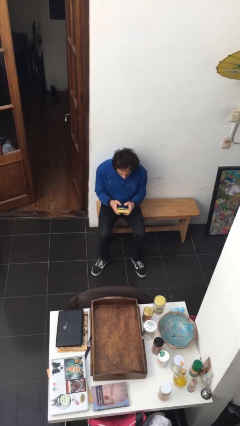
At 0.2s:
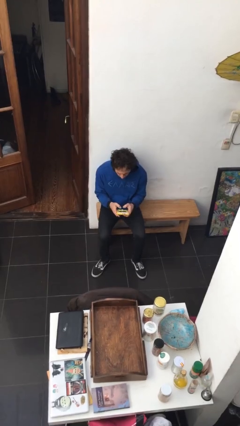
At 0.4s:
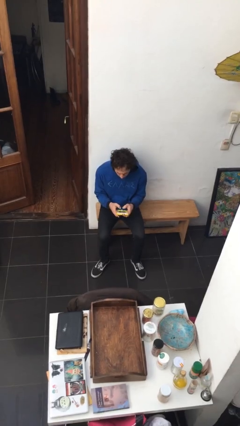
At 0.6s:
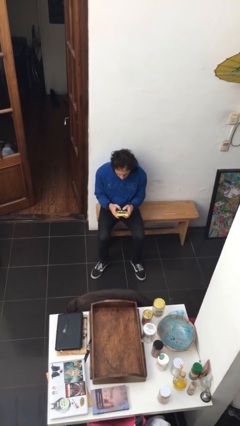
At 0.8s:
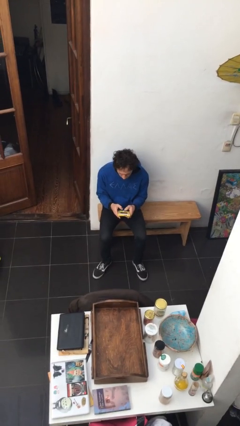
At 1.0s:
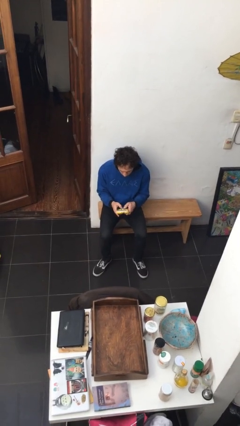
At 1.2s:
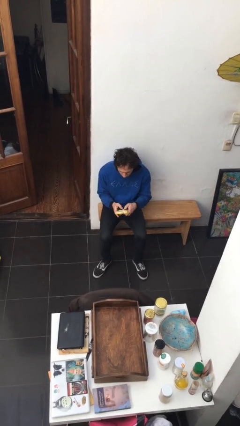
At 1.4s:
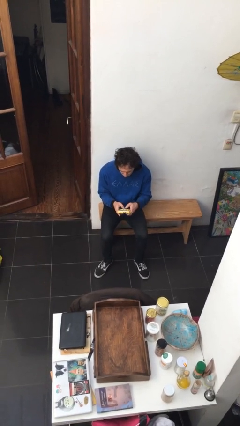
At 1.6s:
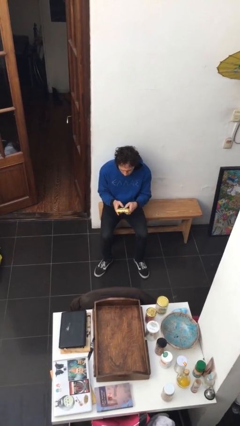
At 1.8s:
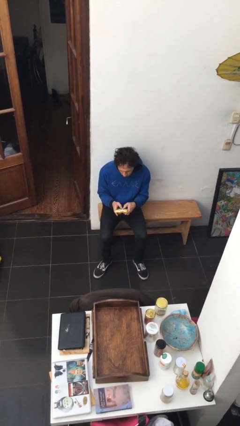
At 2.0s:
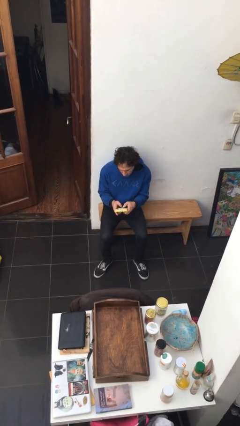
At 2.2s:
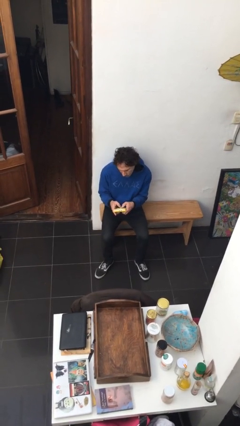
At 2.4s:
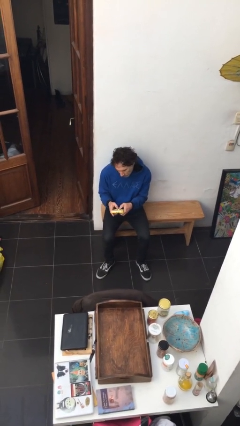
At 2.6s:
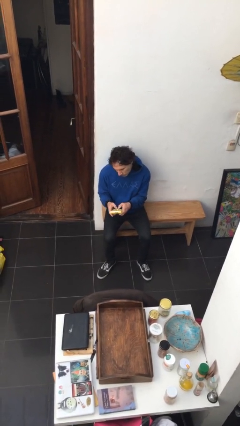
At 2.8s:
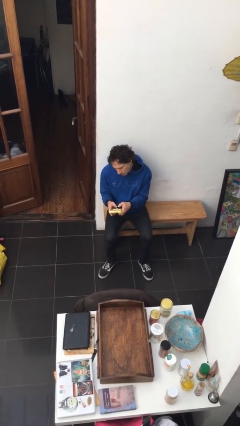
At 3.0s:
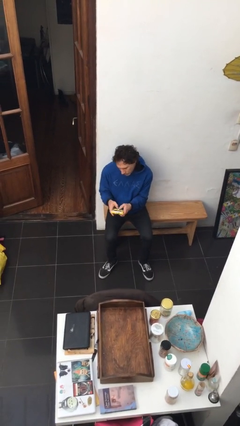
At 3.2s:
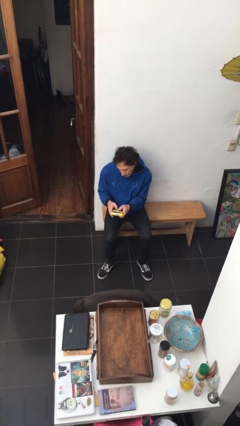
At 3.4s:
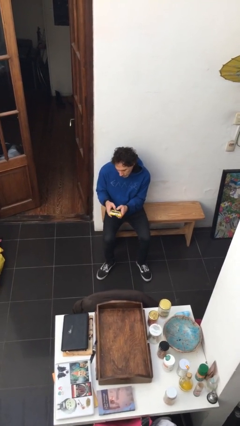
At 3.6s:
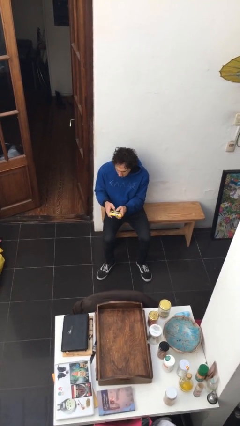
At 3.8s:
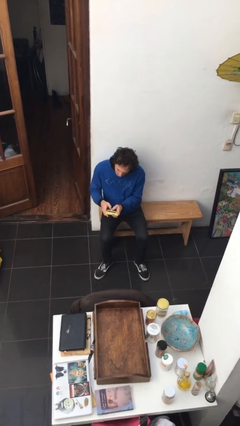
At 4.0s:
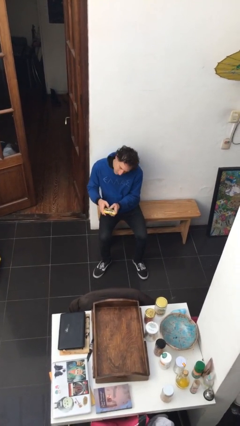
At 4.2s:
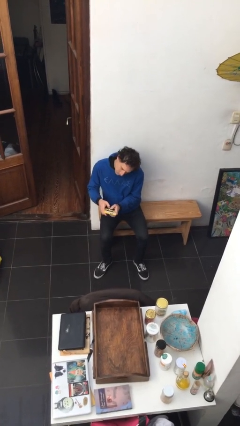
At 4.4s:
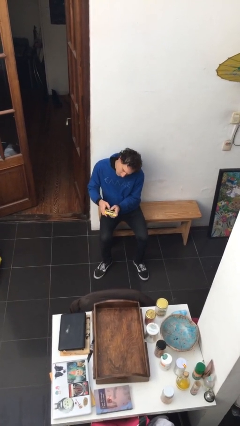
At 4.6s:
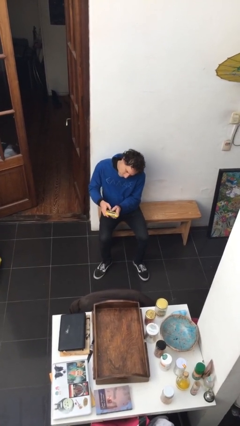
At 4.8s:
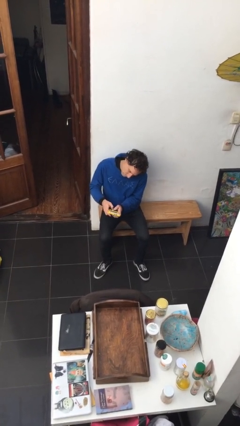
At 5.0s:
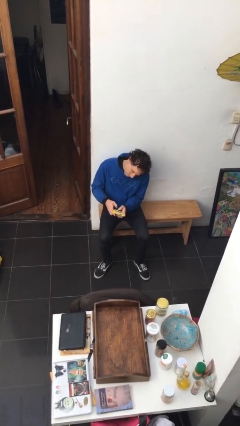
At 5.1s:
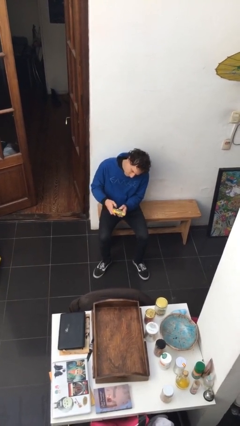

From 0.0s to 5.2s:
person interacts with handheld game

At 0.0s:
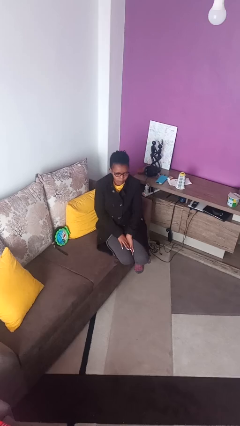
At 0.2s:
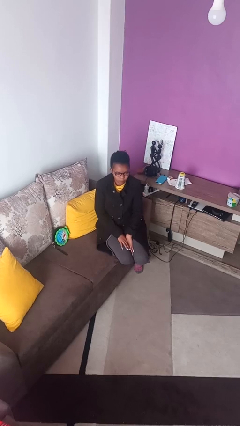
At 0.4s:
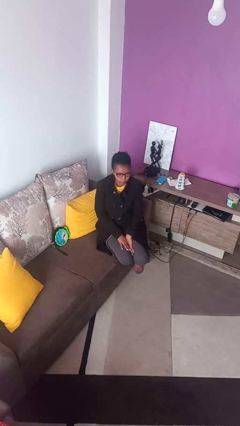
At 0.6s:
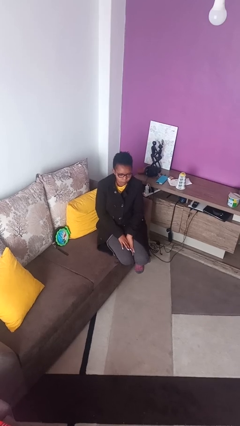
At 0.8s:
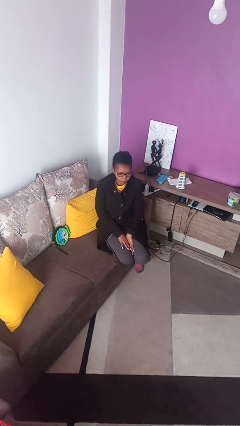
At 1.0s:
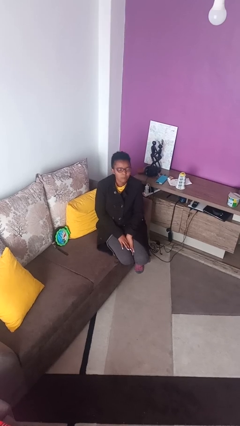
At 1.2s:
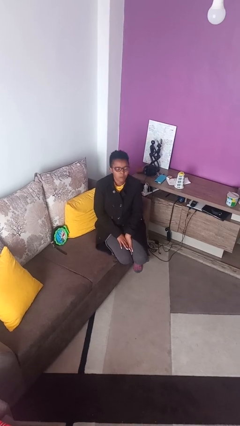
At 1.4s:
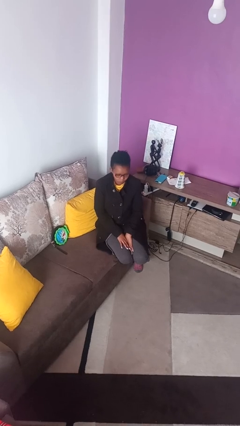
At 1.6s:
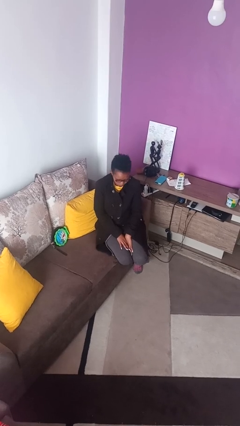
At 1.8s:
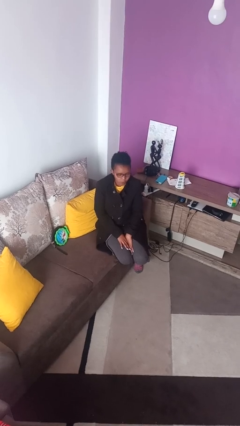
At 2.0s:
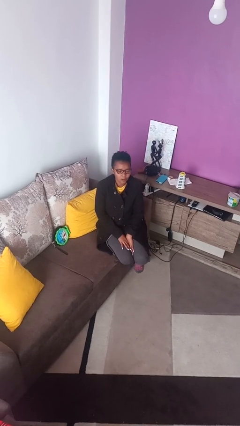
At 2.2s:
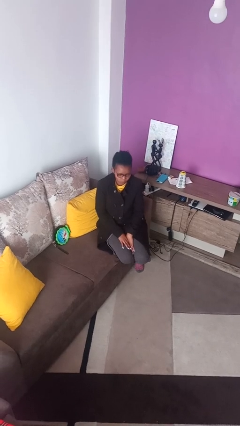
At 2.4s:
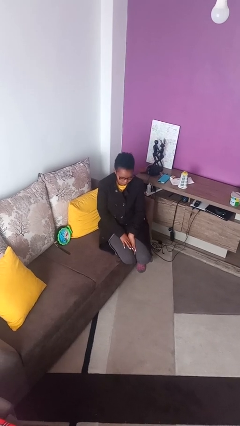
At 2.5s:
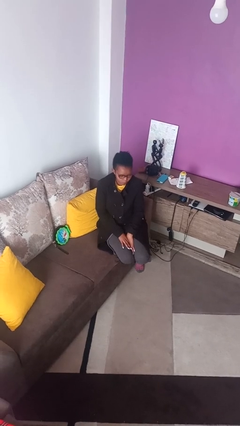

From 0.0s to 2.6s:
person nods head

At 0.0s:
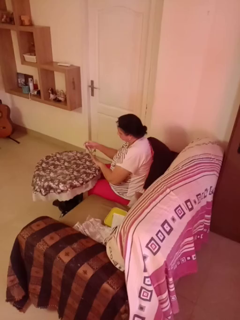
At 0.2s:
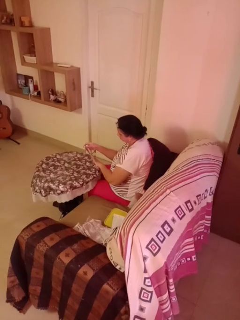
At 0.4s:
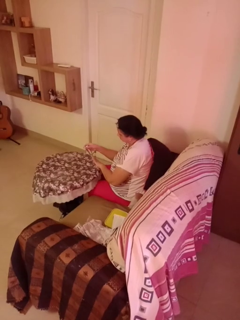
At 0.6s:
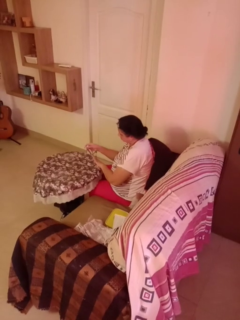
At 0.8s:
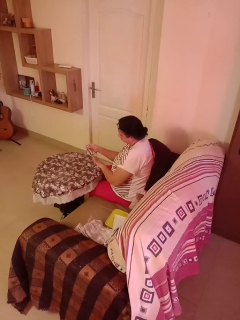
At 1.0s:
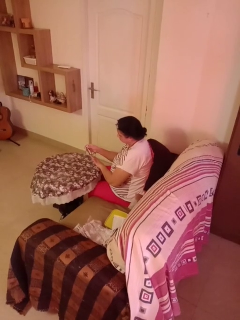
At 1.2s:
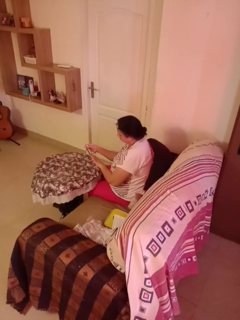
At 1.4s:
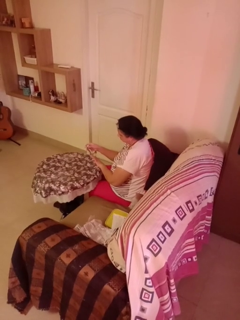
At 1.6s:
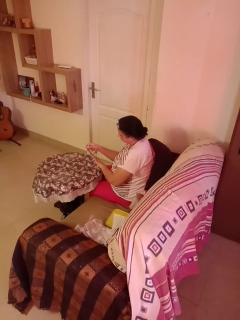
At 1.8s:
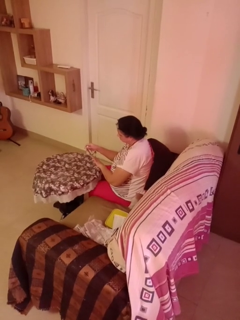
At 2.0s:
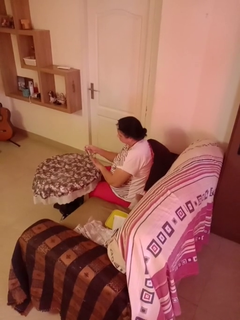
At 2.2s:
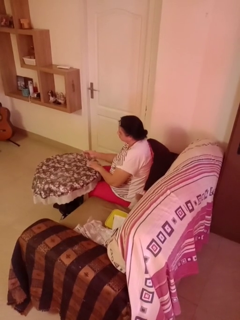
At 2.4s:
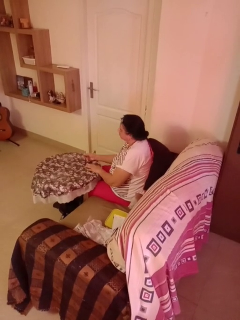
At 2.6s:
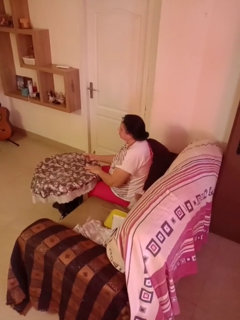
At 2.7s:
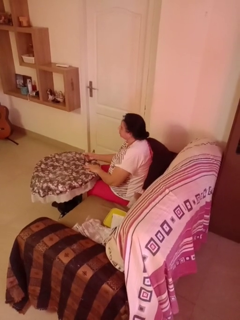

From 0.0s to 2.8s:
person clips fingernails

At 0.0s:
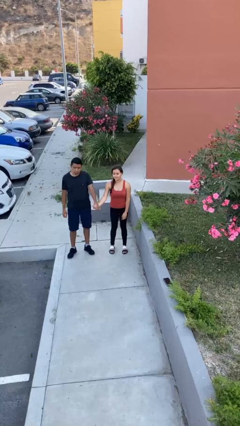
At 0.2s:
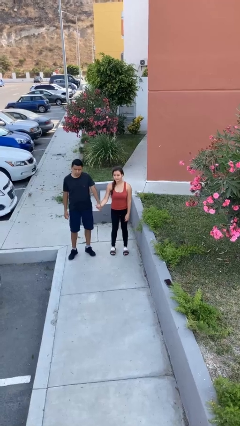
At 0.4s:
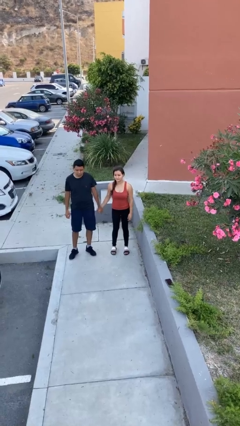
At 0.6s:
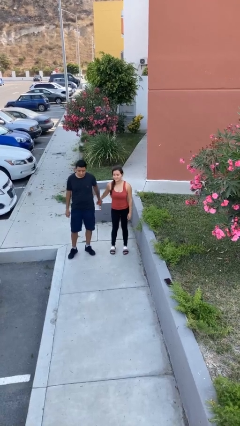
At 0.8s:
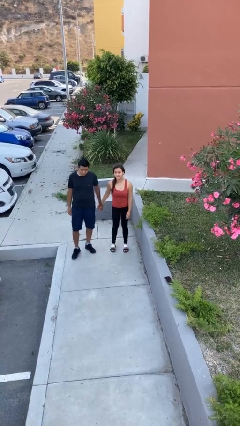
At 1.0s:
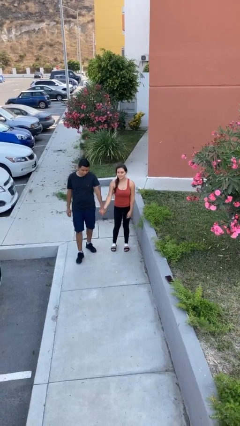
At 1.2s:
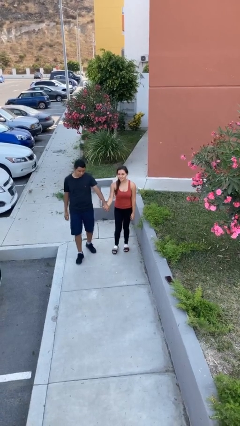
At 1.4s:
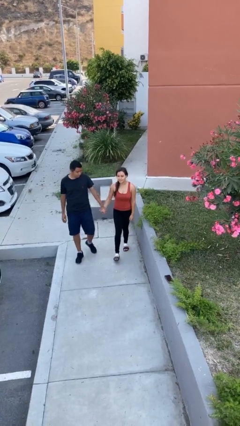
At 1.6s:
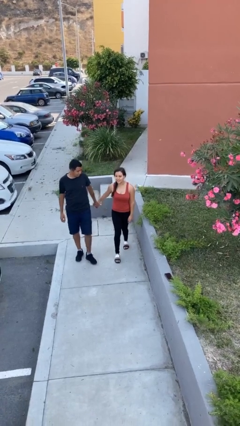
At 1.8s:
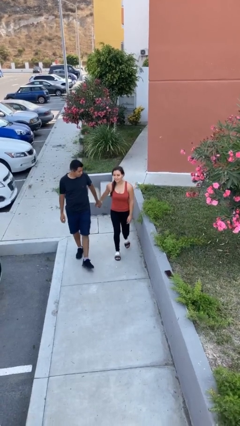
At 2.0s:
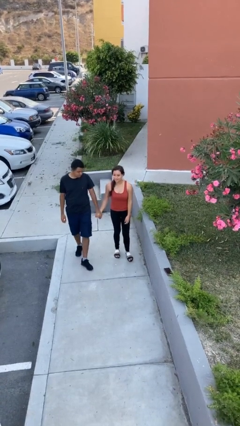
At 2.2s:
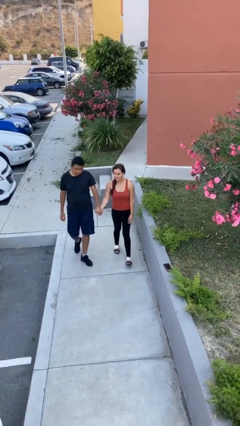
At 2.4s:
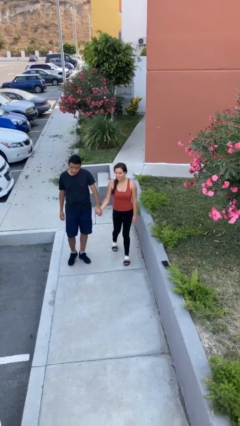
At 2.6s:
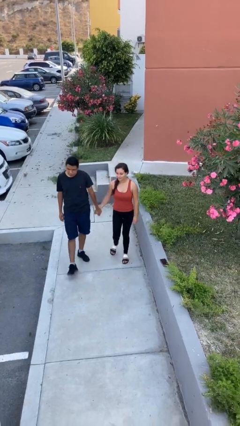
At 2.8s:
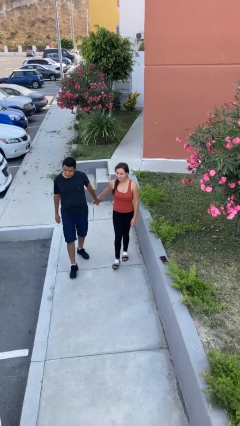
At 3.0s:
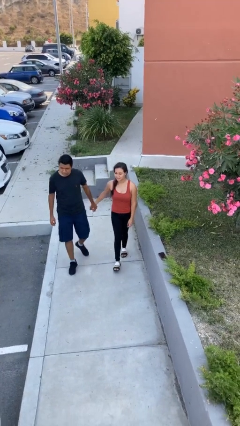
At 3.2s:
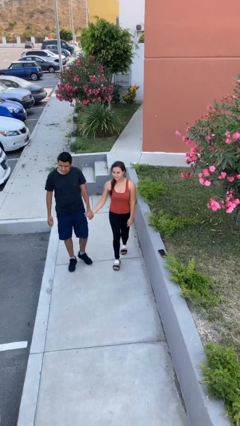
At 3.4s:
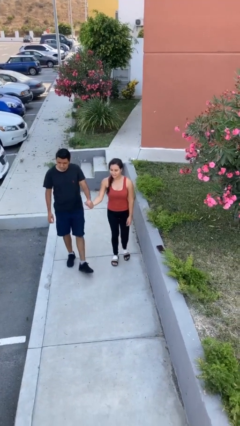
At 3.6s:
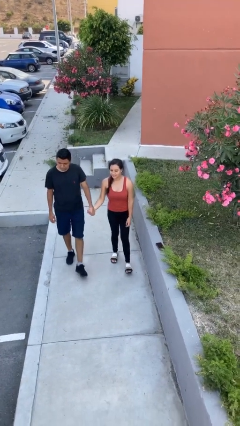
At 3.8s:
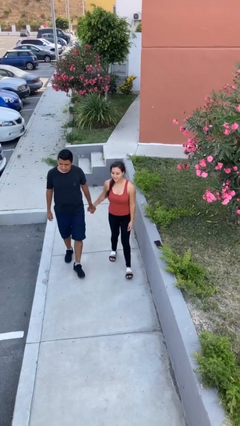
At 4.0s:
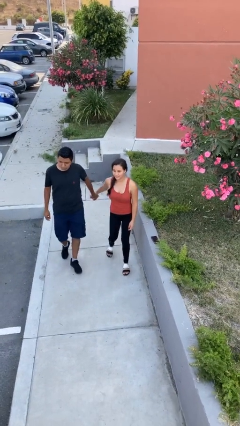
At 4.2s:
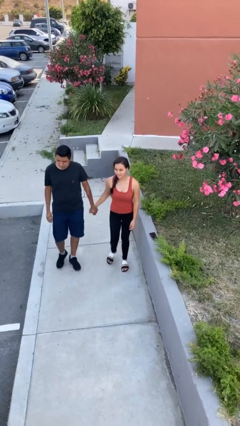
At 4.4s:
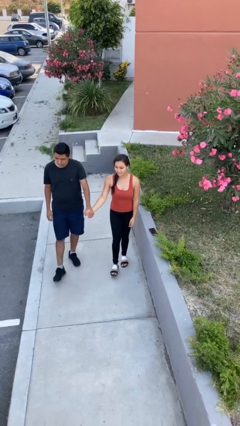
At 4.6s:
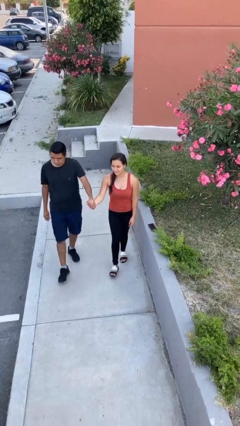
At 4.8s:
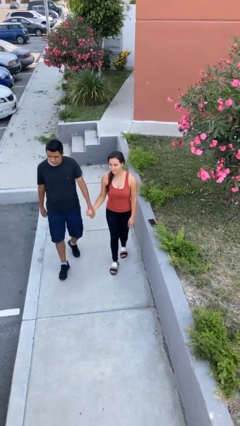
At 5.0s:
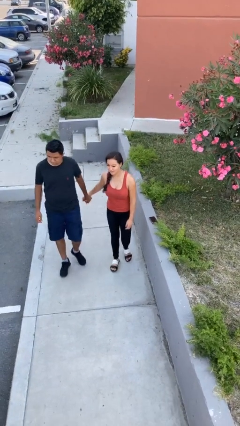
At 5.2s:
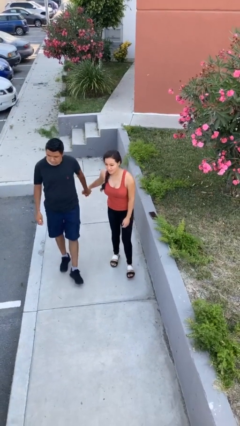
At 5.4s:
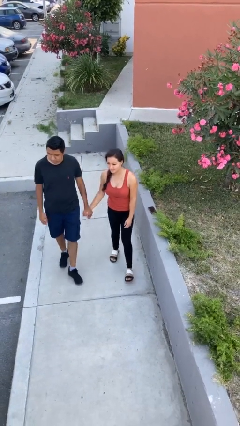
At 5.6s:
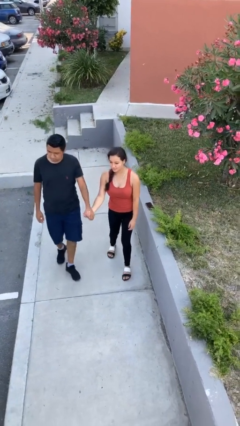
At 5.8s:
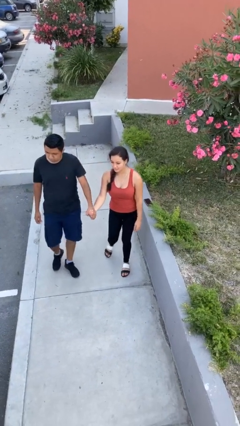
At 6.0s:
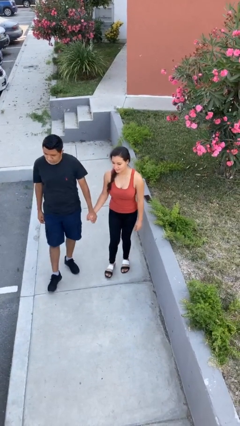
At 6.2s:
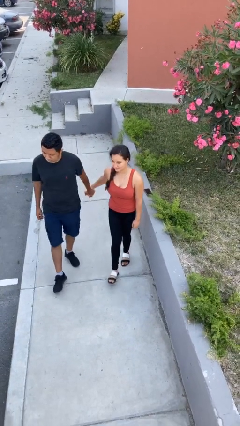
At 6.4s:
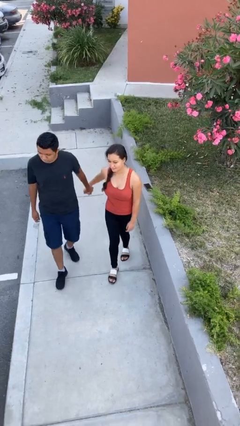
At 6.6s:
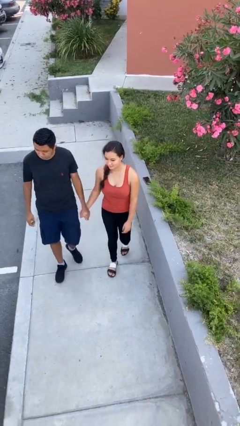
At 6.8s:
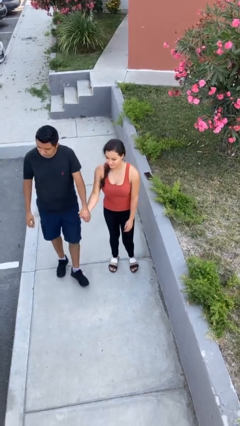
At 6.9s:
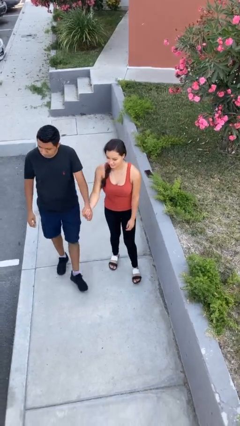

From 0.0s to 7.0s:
person holds hand

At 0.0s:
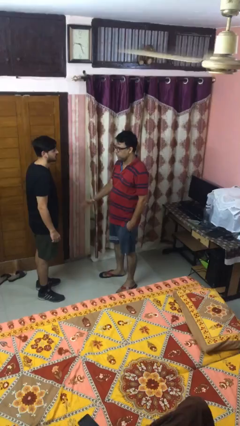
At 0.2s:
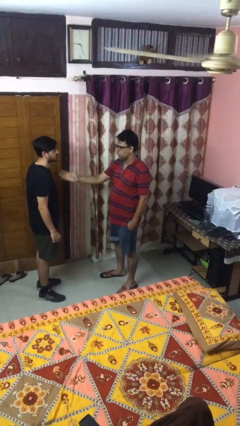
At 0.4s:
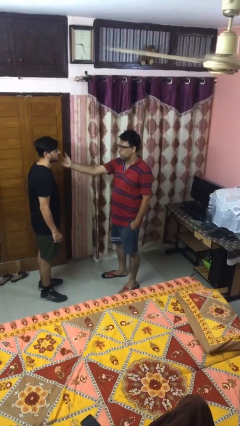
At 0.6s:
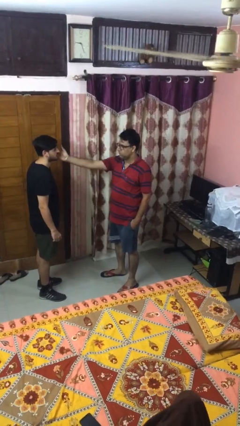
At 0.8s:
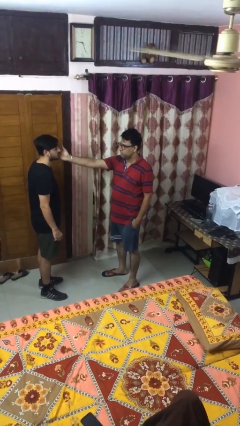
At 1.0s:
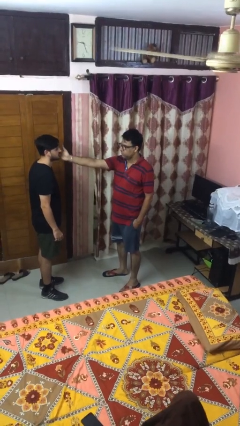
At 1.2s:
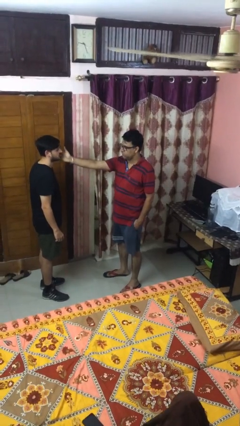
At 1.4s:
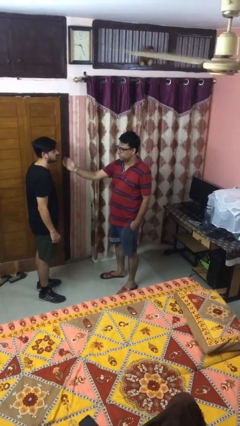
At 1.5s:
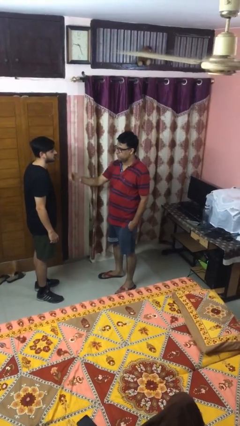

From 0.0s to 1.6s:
person touches face of person
